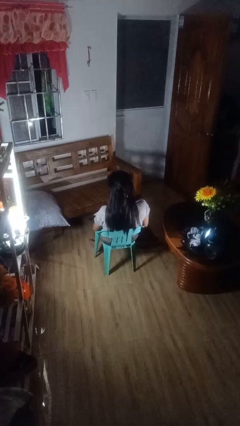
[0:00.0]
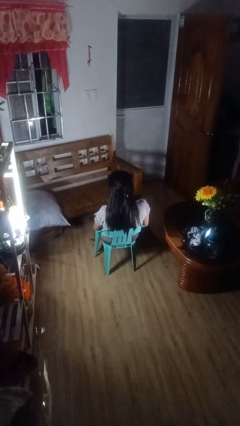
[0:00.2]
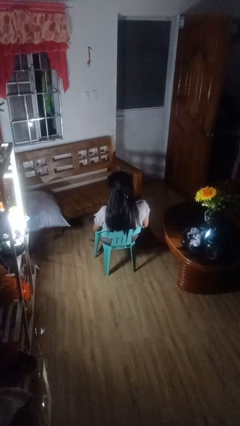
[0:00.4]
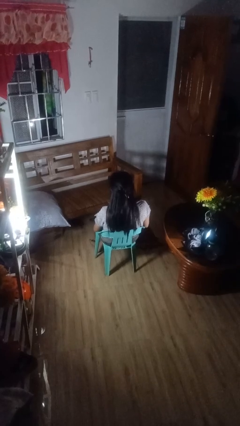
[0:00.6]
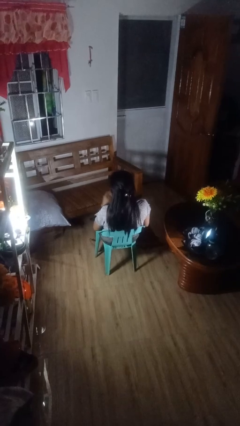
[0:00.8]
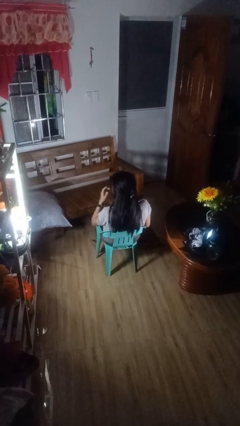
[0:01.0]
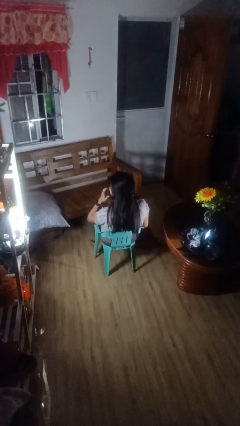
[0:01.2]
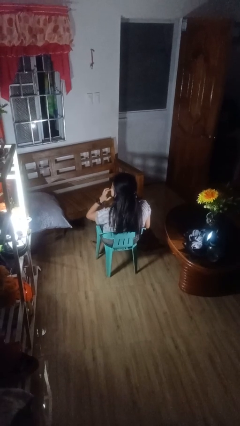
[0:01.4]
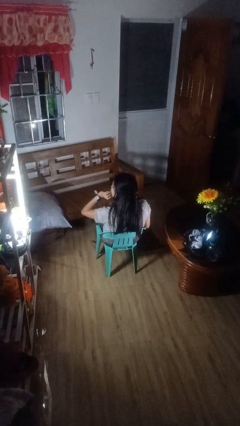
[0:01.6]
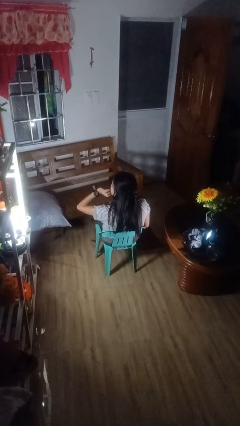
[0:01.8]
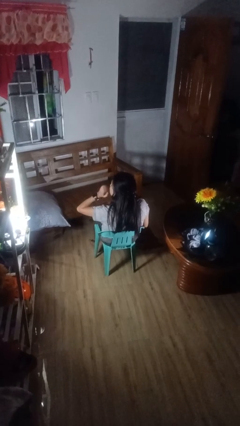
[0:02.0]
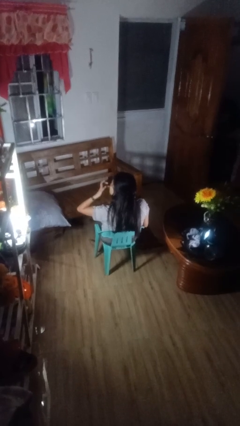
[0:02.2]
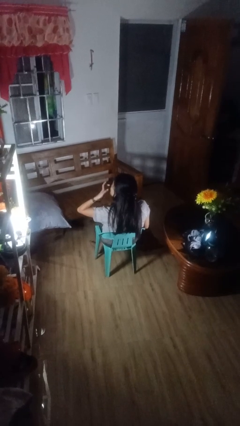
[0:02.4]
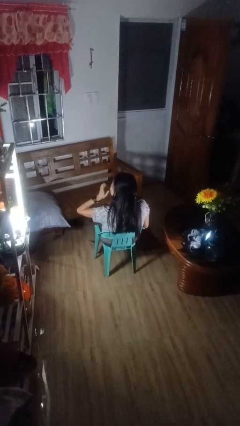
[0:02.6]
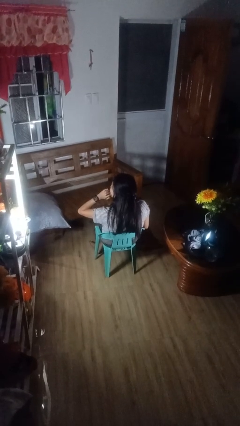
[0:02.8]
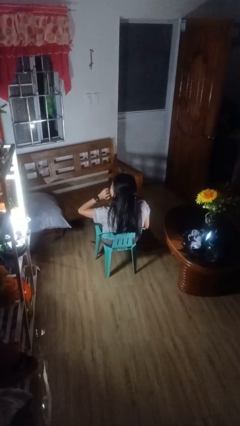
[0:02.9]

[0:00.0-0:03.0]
person licks fingers

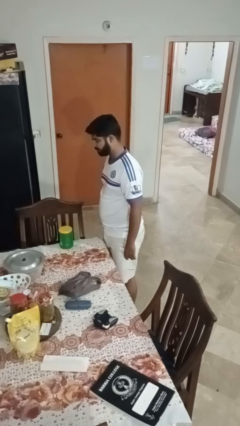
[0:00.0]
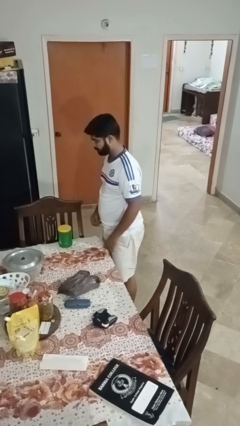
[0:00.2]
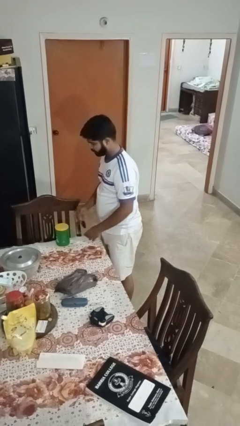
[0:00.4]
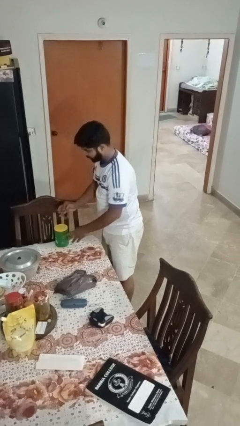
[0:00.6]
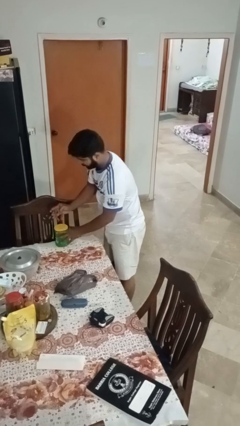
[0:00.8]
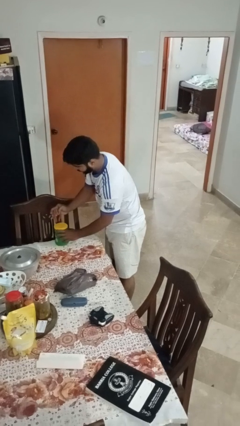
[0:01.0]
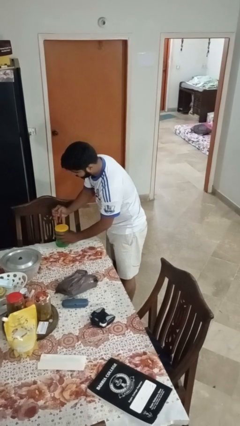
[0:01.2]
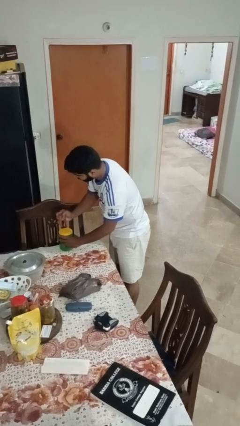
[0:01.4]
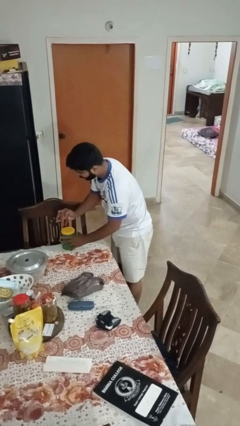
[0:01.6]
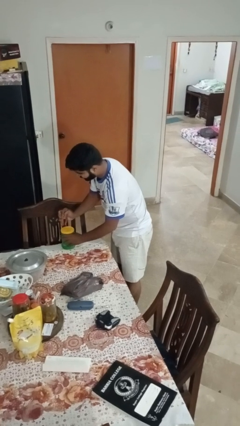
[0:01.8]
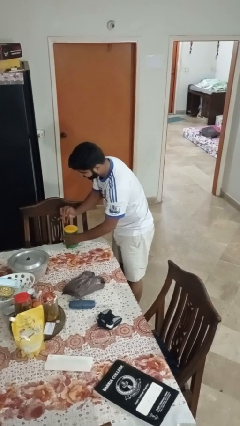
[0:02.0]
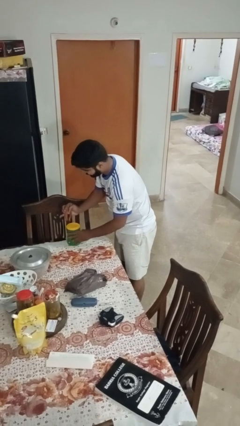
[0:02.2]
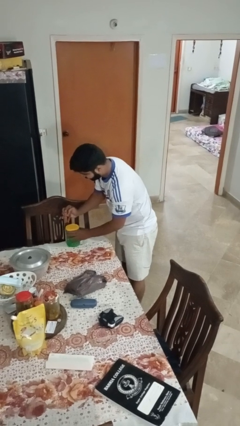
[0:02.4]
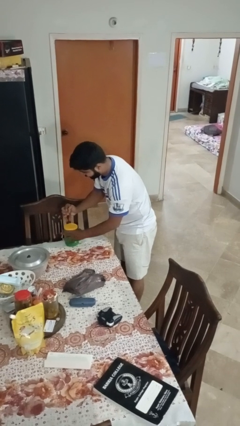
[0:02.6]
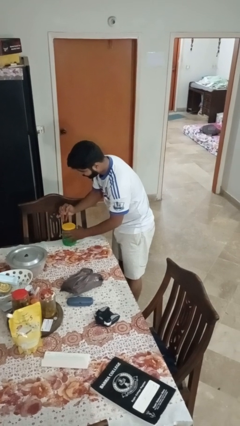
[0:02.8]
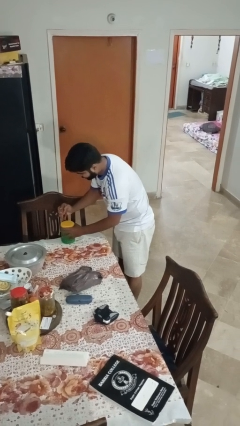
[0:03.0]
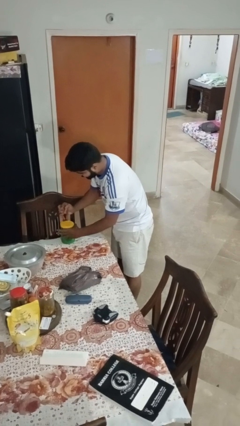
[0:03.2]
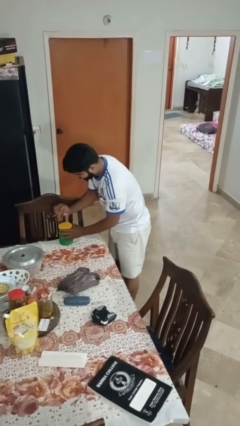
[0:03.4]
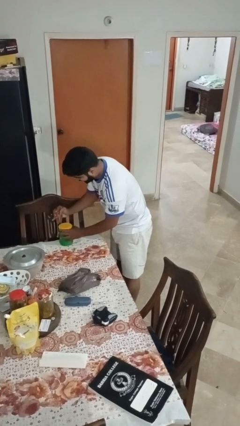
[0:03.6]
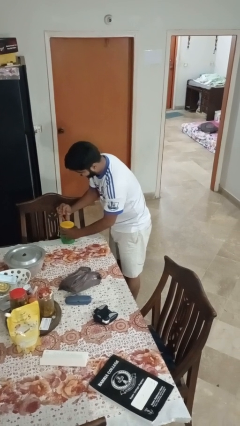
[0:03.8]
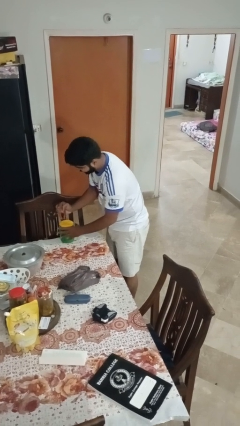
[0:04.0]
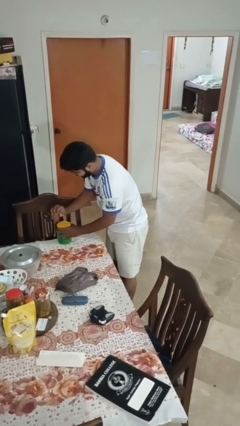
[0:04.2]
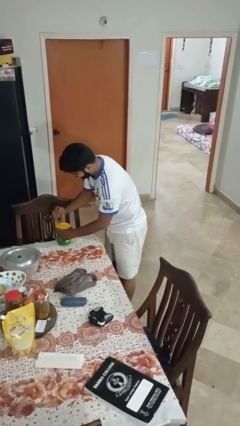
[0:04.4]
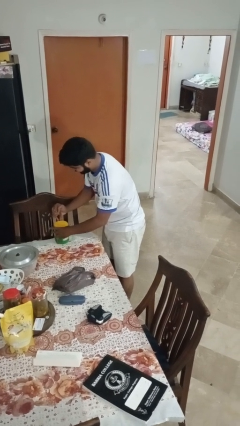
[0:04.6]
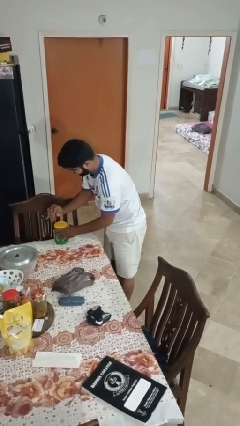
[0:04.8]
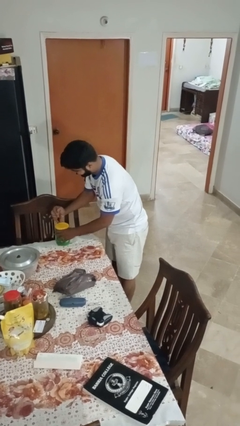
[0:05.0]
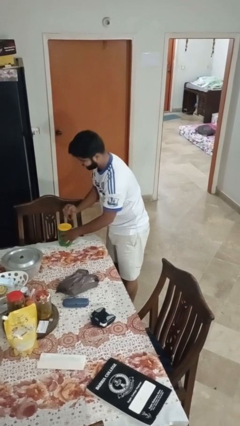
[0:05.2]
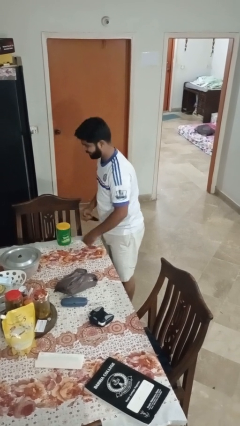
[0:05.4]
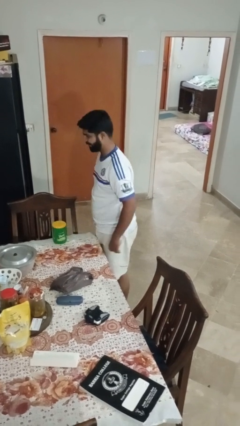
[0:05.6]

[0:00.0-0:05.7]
person opens can with can opener

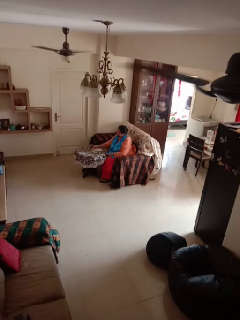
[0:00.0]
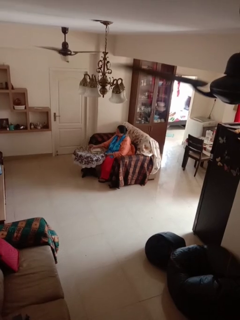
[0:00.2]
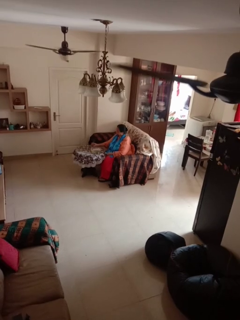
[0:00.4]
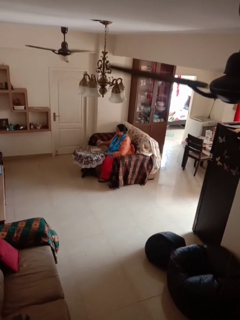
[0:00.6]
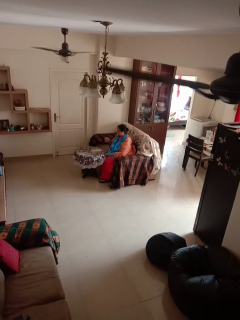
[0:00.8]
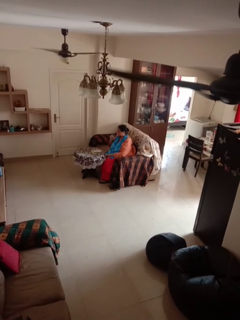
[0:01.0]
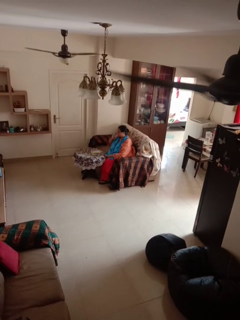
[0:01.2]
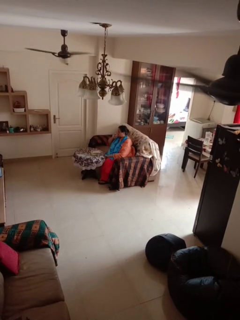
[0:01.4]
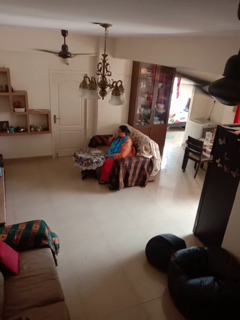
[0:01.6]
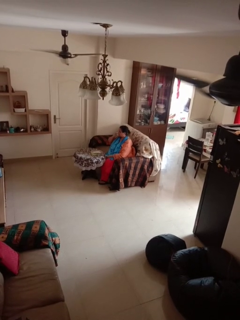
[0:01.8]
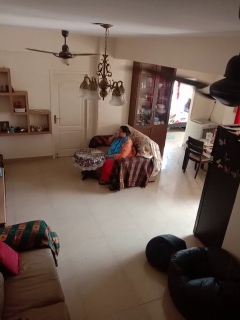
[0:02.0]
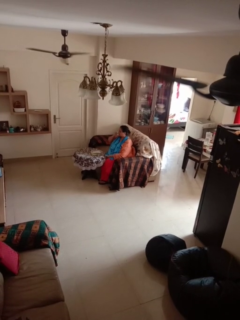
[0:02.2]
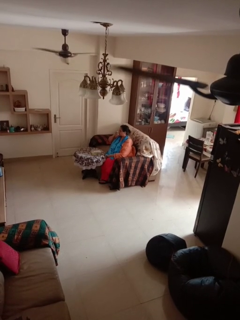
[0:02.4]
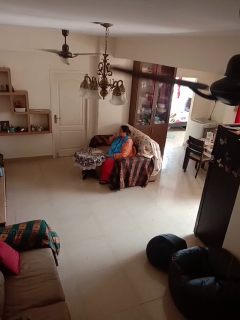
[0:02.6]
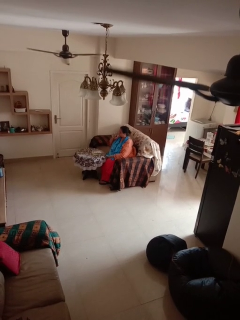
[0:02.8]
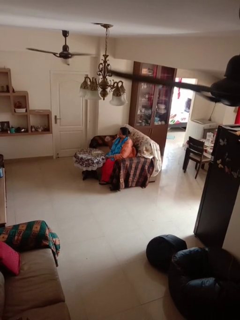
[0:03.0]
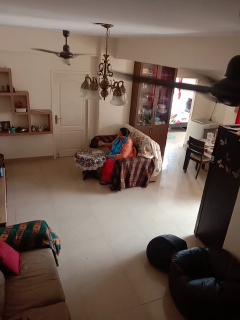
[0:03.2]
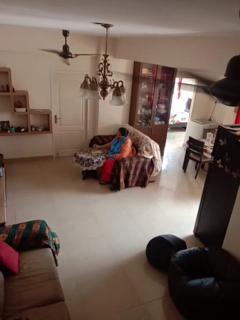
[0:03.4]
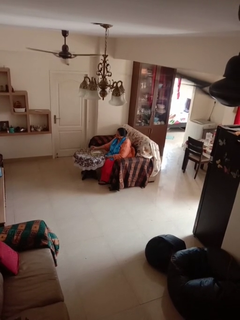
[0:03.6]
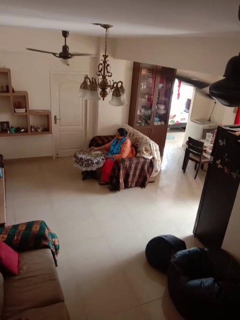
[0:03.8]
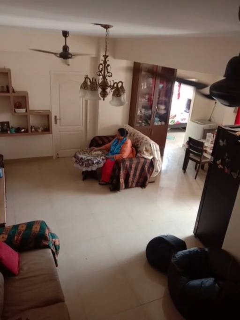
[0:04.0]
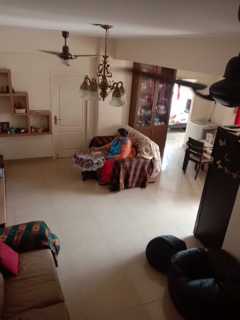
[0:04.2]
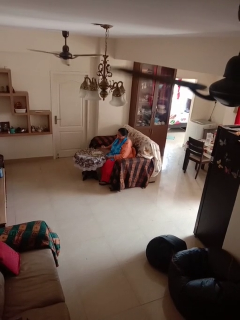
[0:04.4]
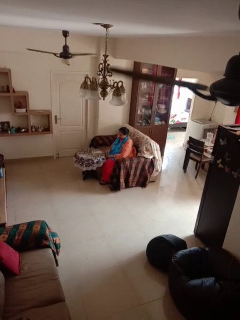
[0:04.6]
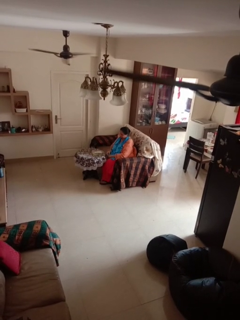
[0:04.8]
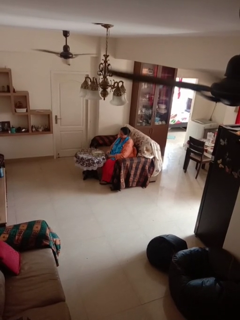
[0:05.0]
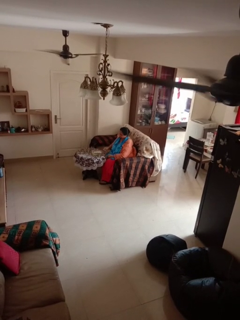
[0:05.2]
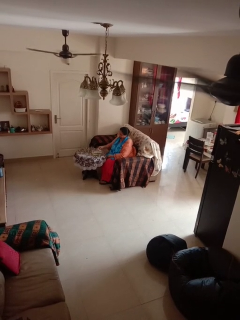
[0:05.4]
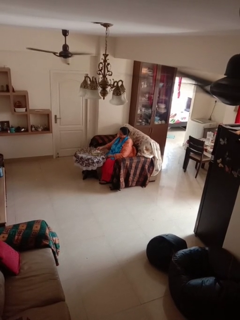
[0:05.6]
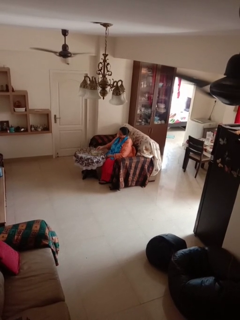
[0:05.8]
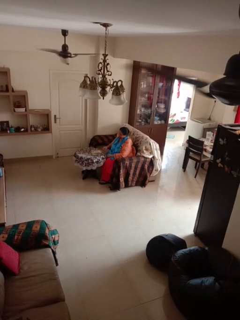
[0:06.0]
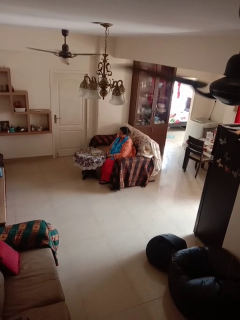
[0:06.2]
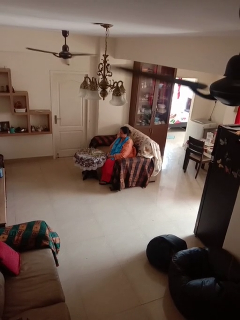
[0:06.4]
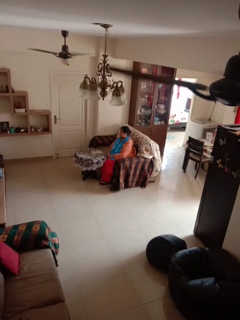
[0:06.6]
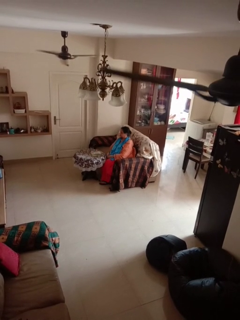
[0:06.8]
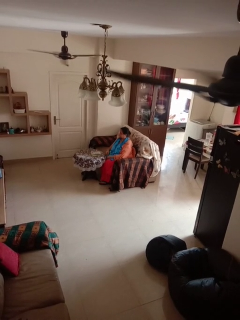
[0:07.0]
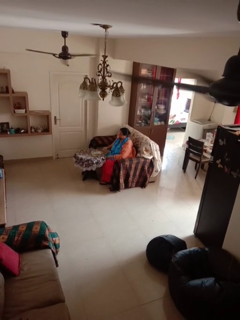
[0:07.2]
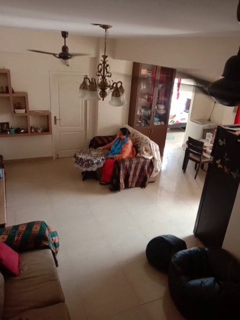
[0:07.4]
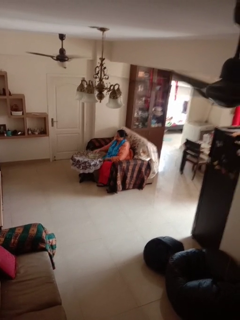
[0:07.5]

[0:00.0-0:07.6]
person drinks from cup

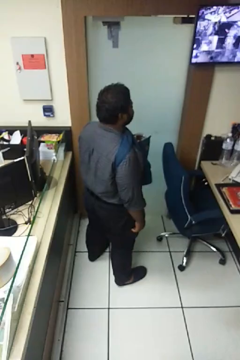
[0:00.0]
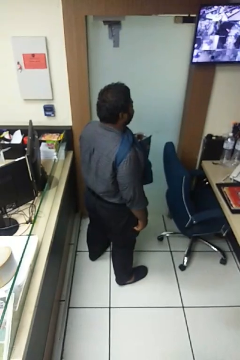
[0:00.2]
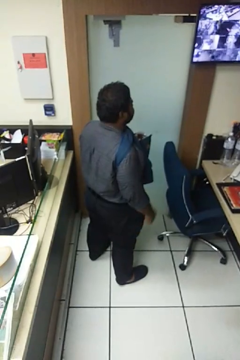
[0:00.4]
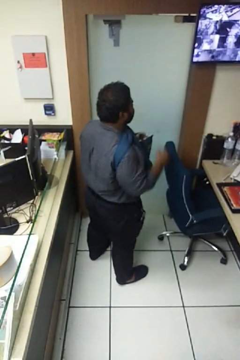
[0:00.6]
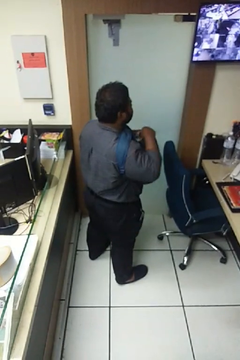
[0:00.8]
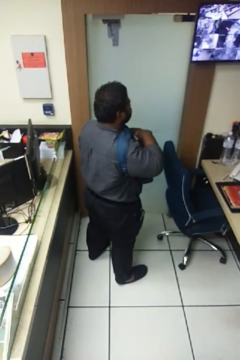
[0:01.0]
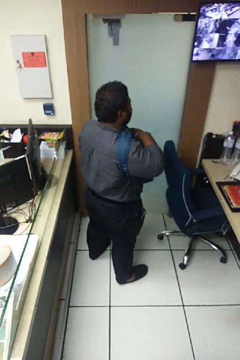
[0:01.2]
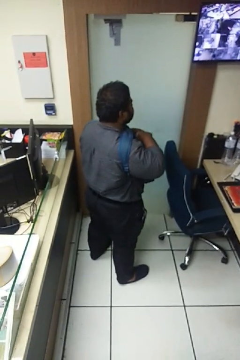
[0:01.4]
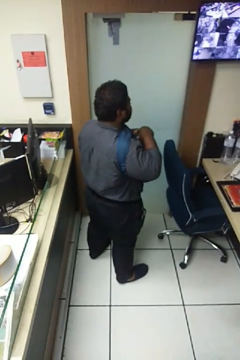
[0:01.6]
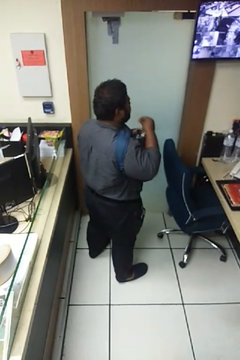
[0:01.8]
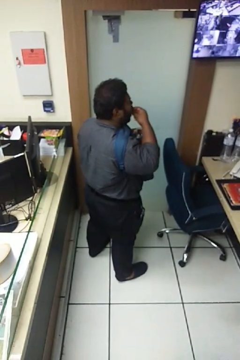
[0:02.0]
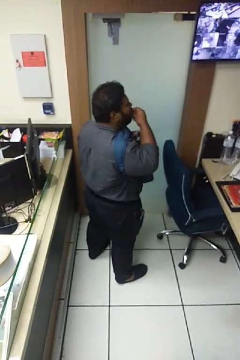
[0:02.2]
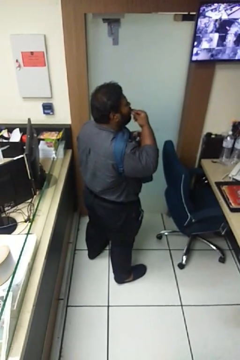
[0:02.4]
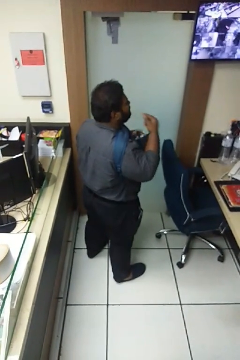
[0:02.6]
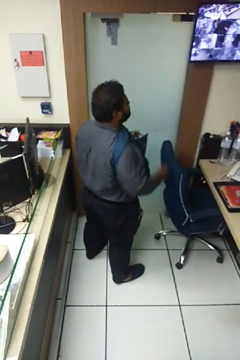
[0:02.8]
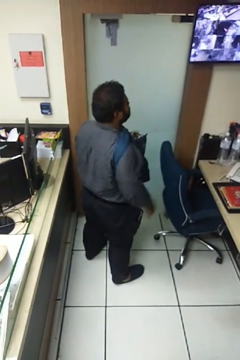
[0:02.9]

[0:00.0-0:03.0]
person eats snack from bag

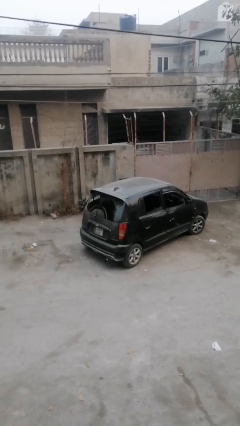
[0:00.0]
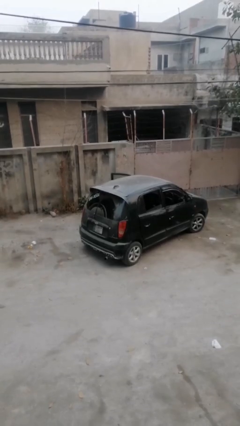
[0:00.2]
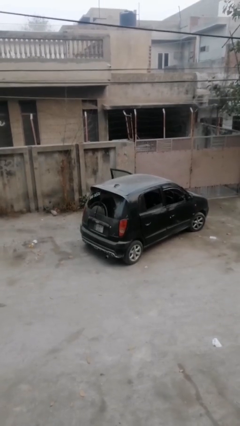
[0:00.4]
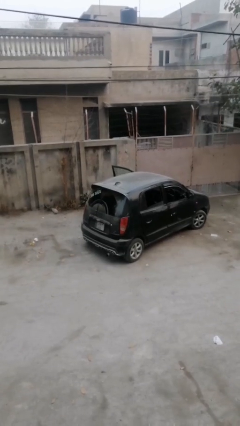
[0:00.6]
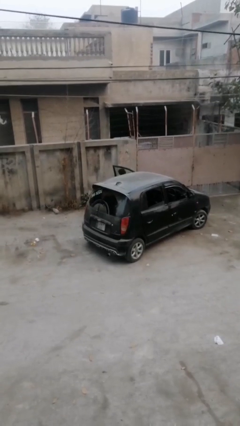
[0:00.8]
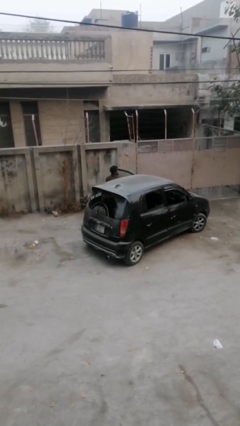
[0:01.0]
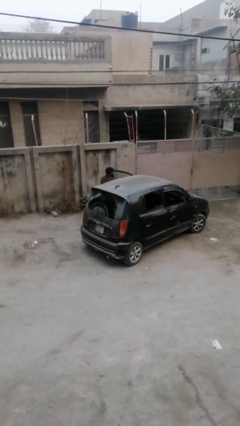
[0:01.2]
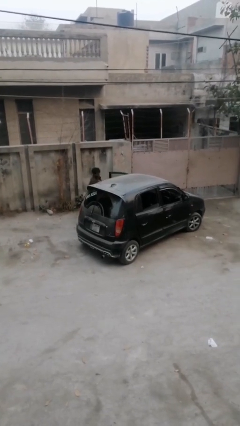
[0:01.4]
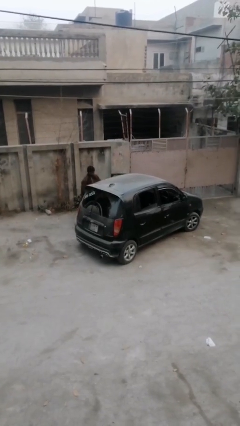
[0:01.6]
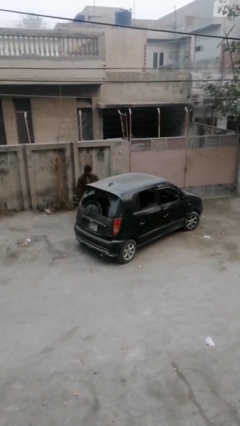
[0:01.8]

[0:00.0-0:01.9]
car drops off person
